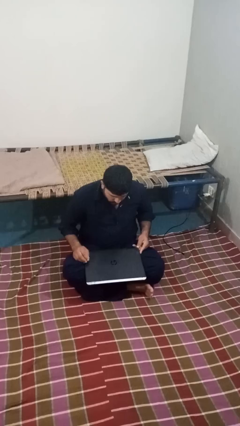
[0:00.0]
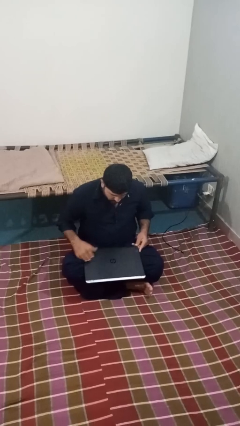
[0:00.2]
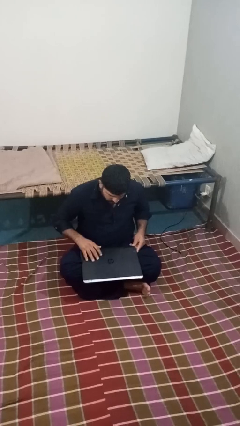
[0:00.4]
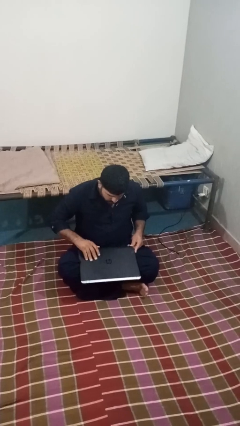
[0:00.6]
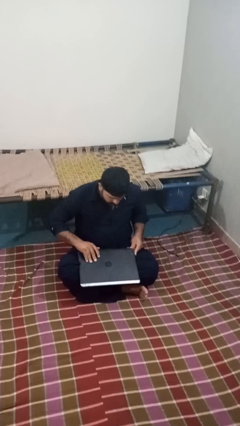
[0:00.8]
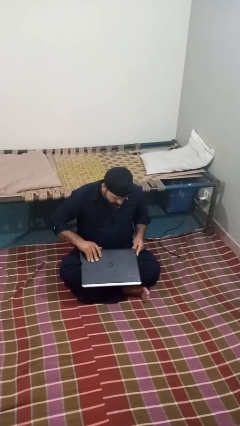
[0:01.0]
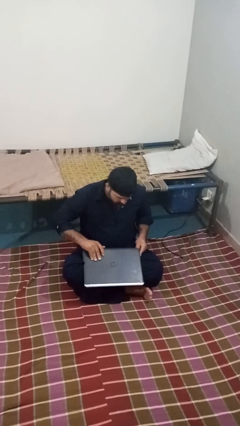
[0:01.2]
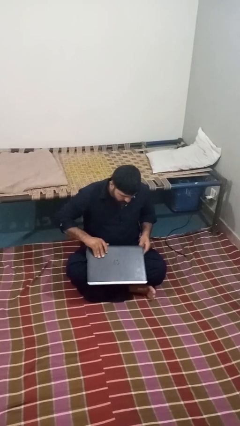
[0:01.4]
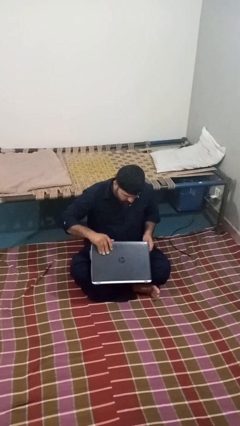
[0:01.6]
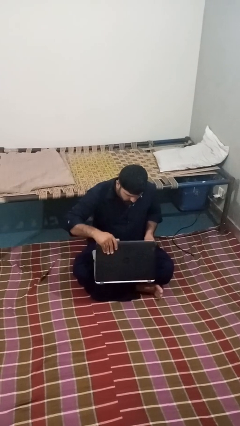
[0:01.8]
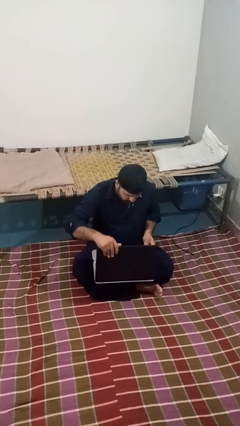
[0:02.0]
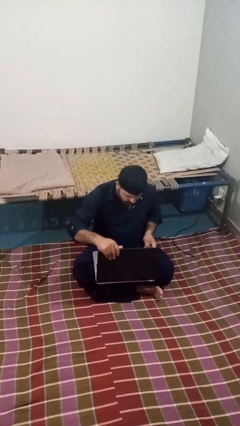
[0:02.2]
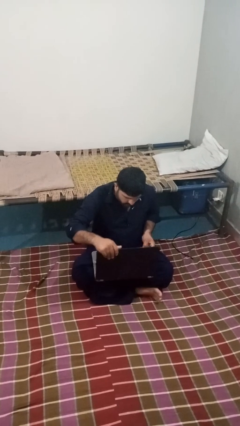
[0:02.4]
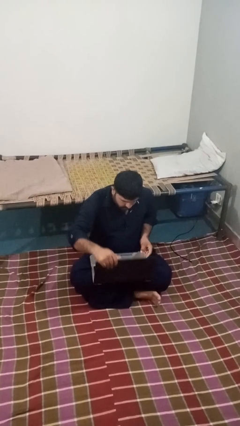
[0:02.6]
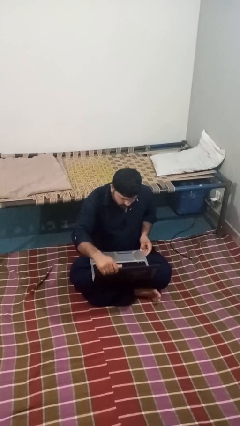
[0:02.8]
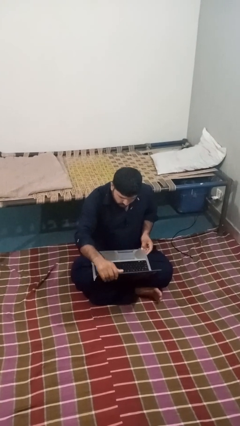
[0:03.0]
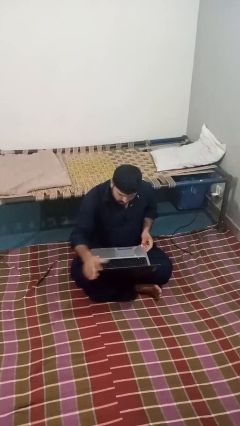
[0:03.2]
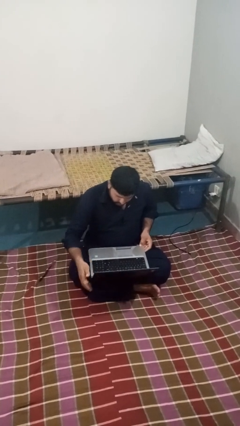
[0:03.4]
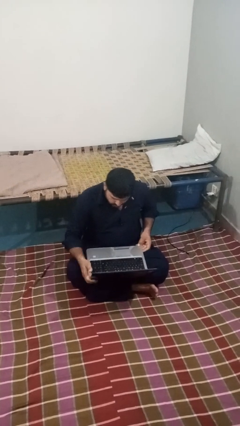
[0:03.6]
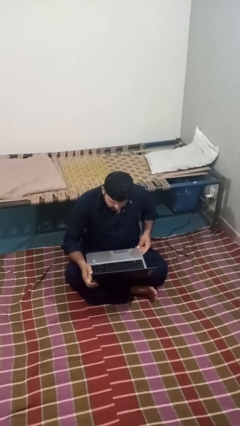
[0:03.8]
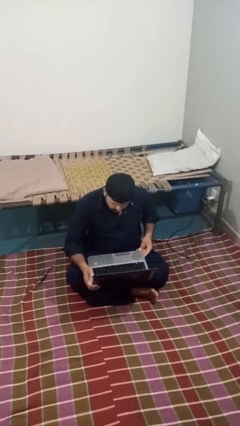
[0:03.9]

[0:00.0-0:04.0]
person opens laptop

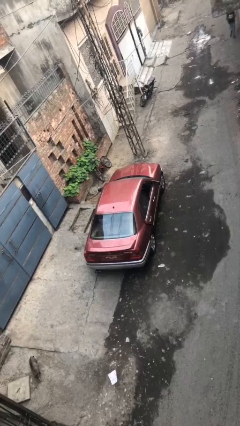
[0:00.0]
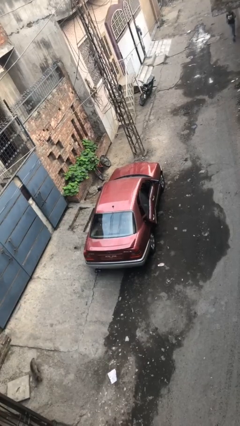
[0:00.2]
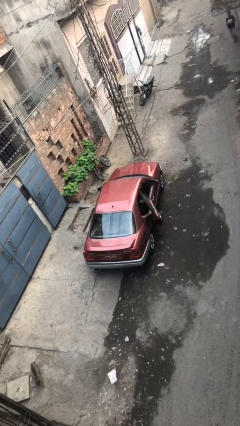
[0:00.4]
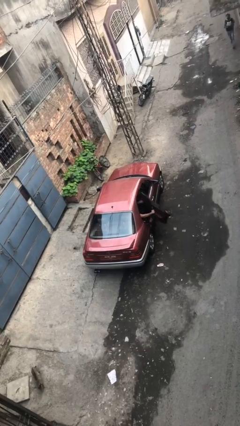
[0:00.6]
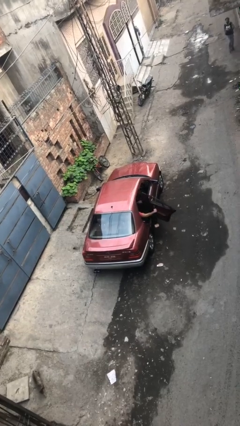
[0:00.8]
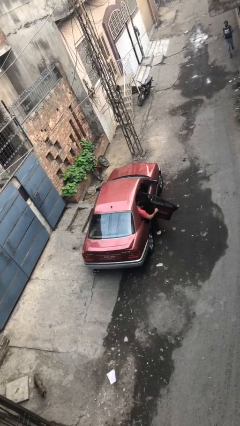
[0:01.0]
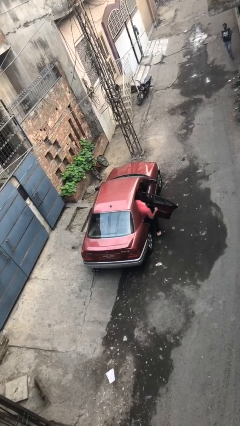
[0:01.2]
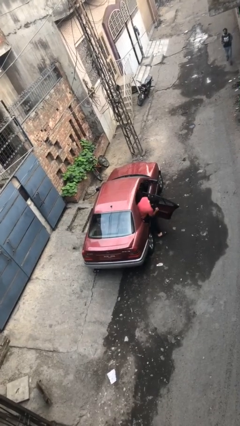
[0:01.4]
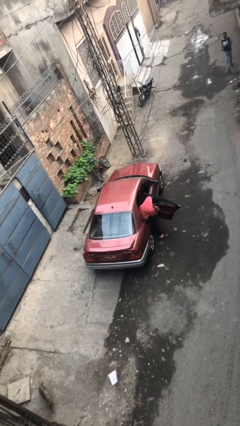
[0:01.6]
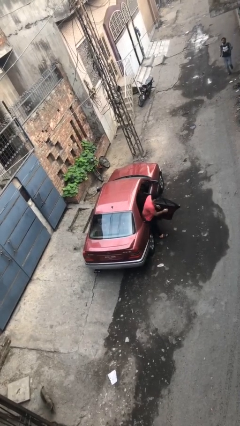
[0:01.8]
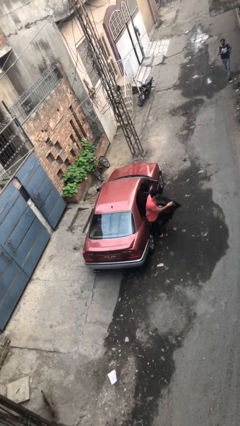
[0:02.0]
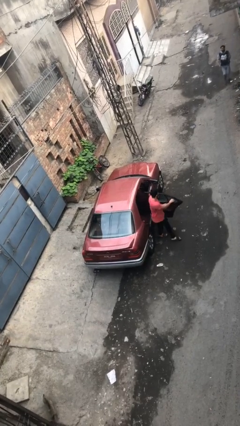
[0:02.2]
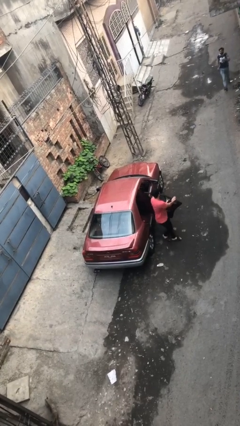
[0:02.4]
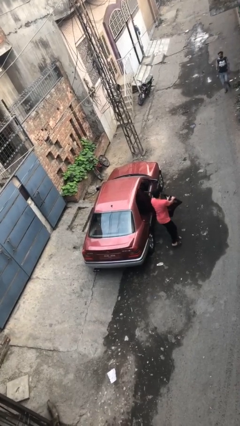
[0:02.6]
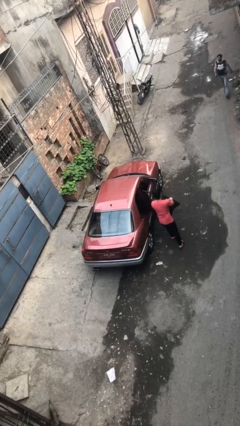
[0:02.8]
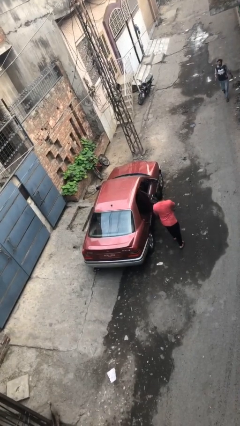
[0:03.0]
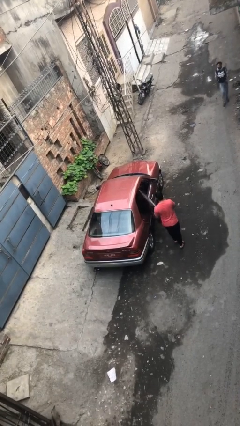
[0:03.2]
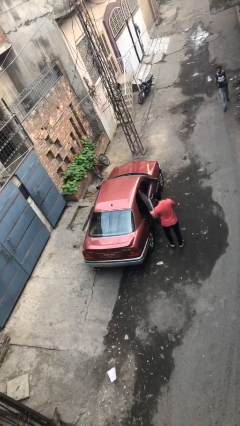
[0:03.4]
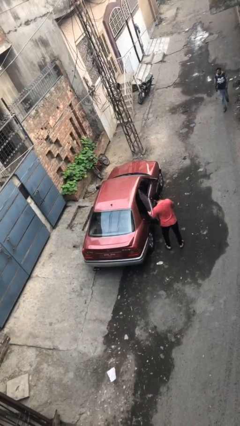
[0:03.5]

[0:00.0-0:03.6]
car drops off person

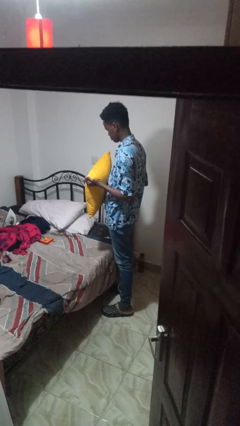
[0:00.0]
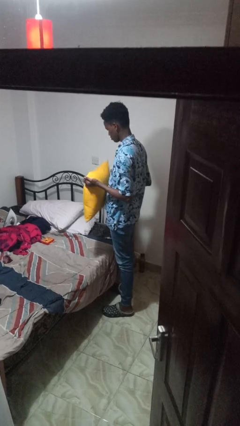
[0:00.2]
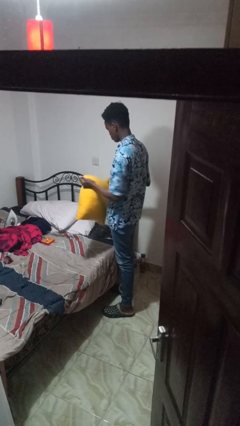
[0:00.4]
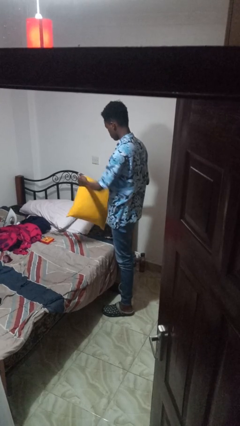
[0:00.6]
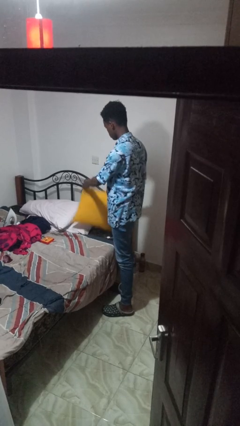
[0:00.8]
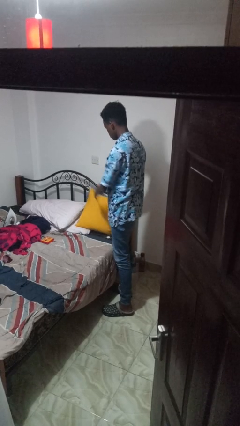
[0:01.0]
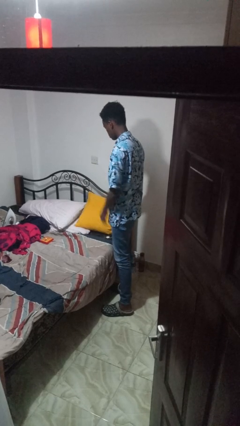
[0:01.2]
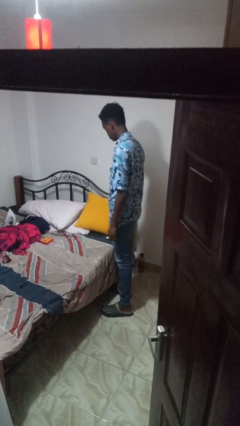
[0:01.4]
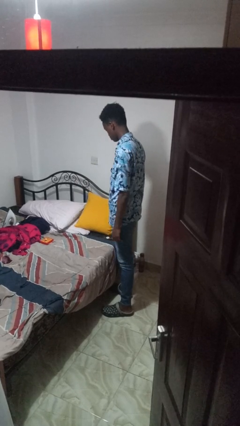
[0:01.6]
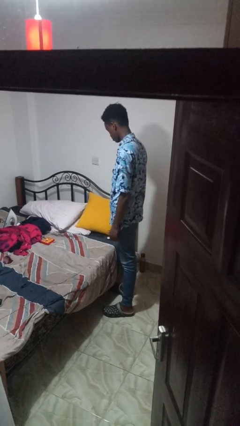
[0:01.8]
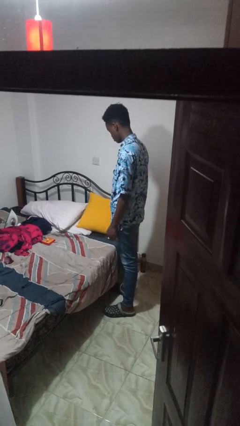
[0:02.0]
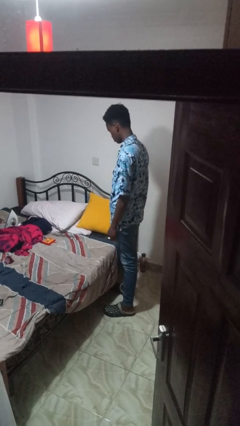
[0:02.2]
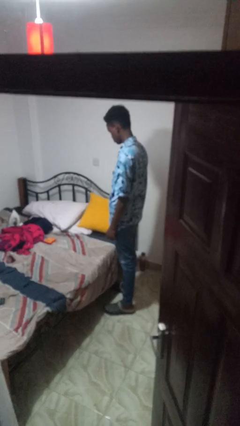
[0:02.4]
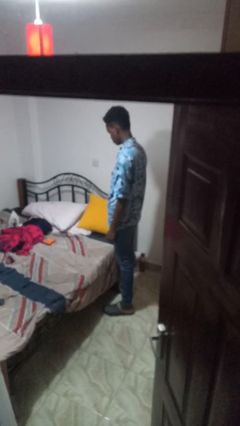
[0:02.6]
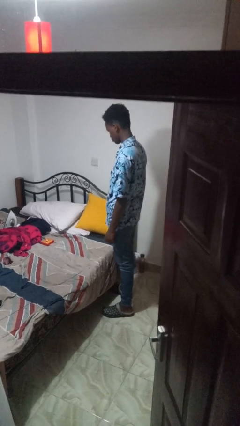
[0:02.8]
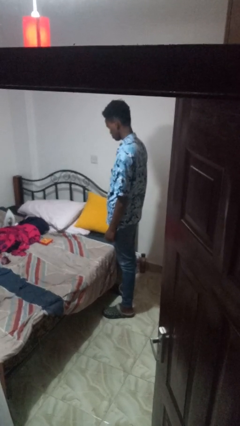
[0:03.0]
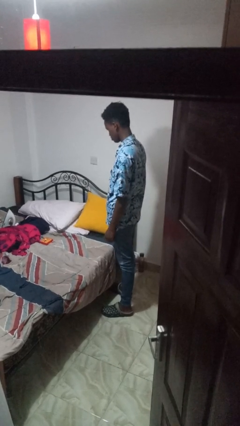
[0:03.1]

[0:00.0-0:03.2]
person puts down object on bed

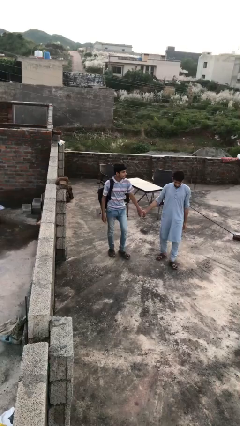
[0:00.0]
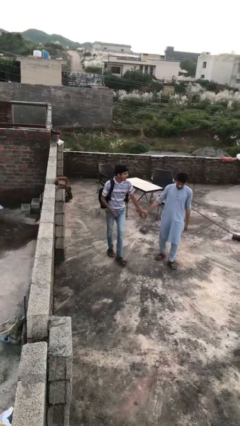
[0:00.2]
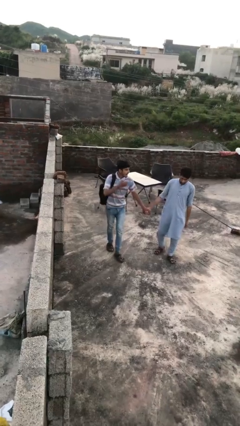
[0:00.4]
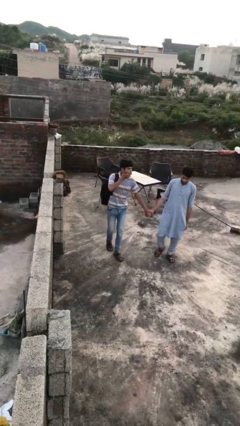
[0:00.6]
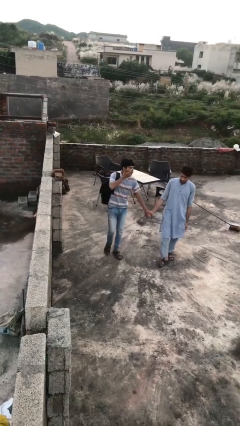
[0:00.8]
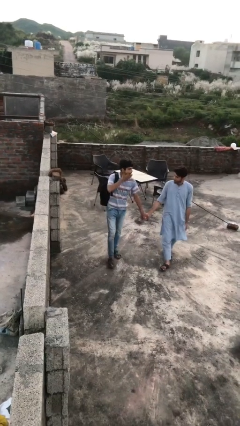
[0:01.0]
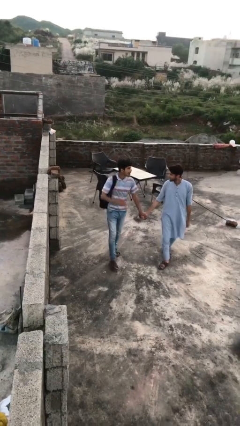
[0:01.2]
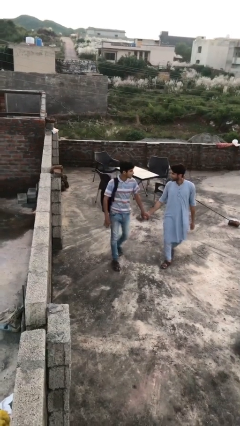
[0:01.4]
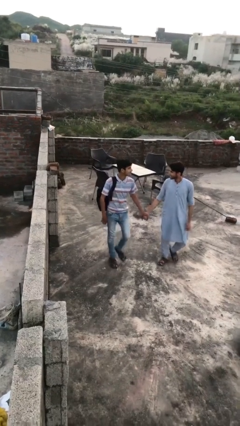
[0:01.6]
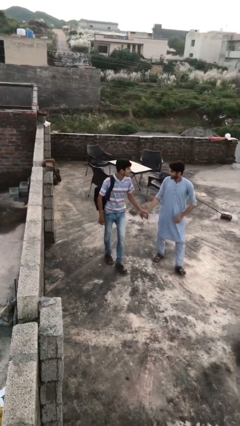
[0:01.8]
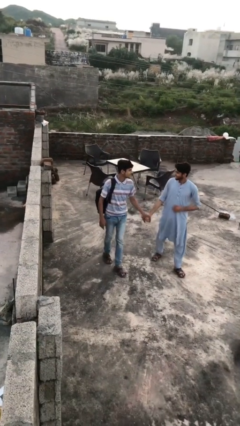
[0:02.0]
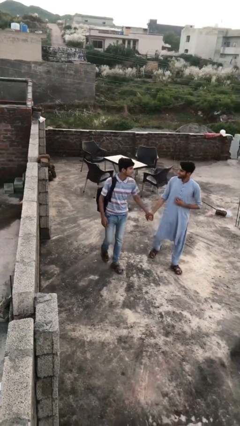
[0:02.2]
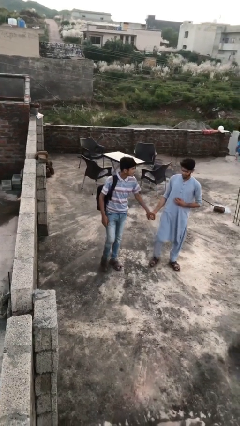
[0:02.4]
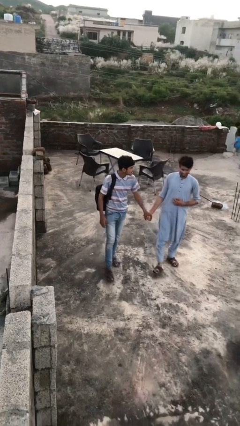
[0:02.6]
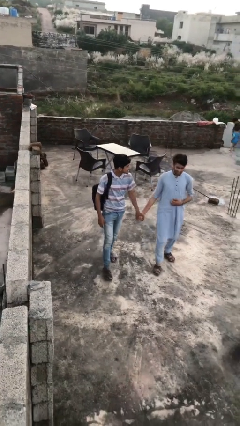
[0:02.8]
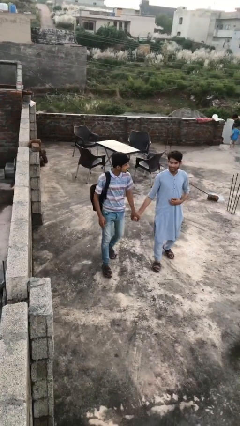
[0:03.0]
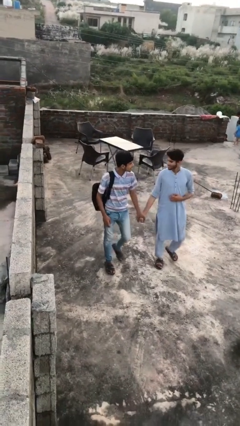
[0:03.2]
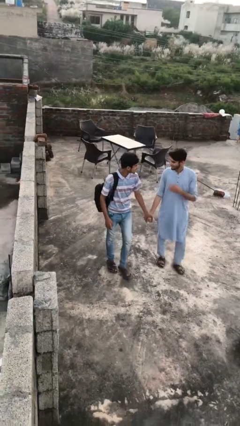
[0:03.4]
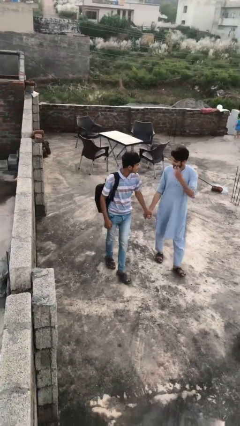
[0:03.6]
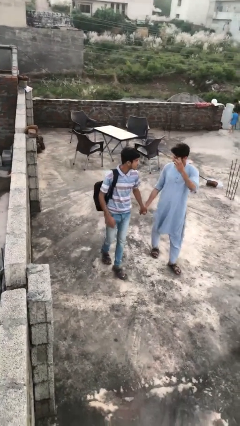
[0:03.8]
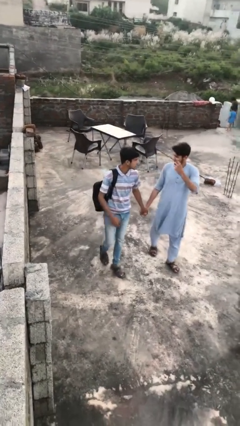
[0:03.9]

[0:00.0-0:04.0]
person holds hand

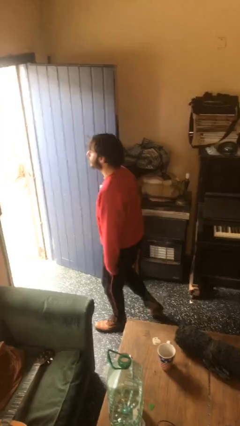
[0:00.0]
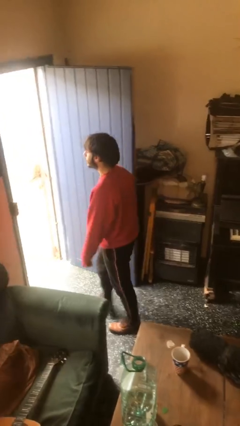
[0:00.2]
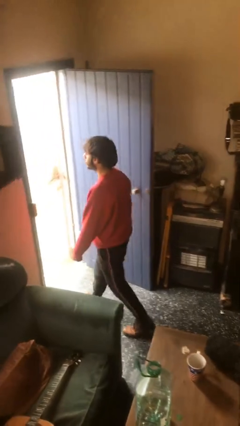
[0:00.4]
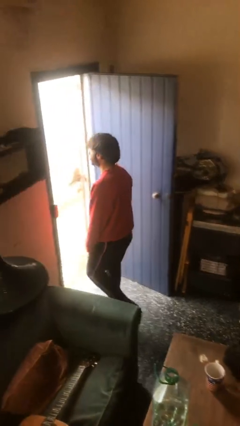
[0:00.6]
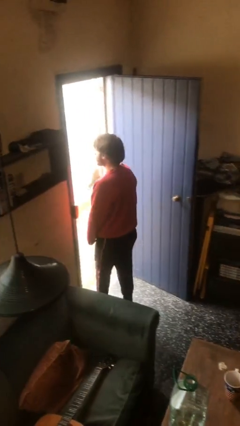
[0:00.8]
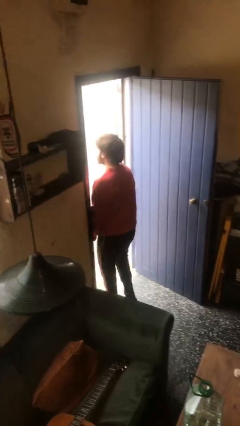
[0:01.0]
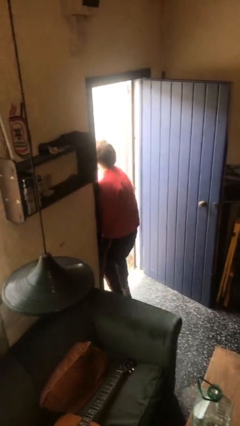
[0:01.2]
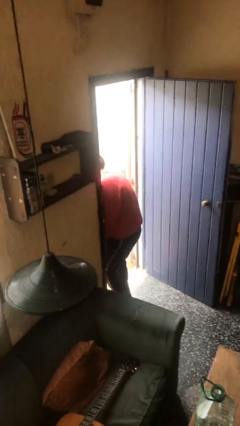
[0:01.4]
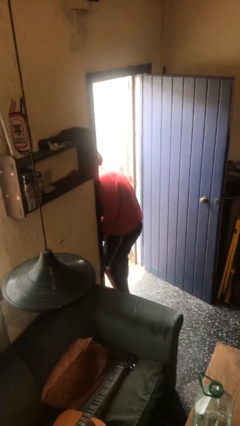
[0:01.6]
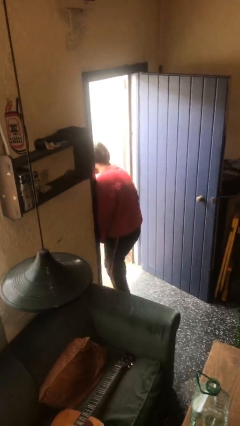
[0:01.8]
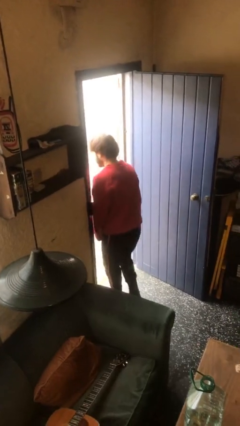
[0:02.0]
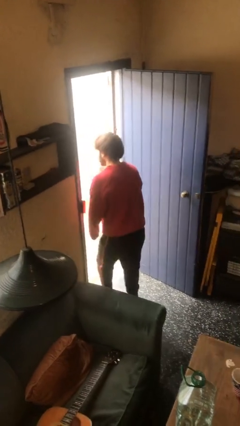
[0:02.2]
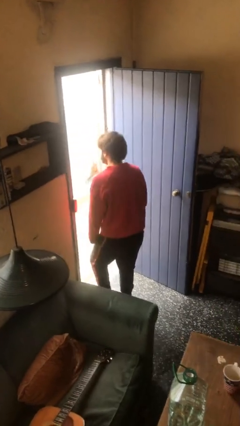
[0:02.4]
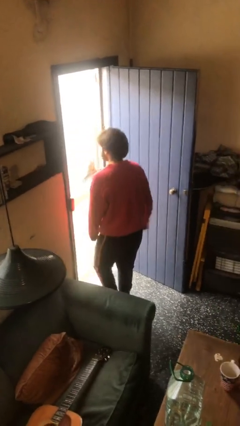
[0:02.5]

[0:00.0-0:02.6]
person bumps into wall

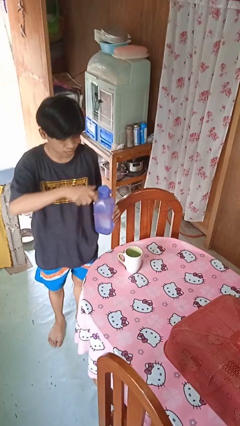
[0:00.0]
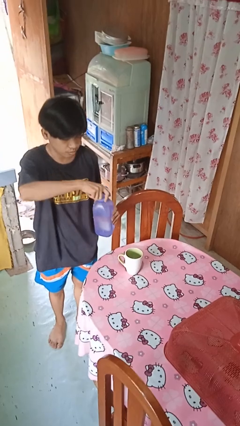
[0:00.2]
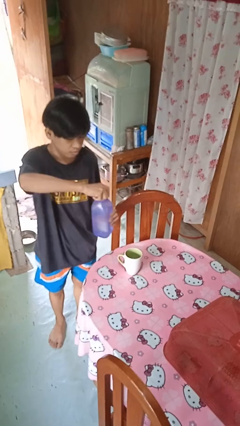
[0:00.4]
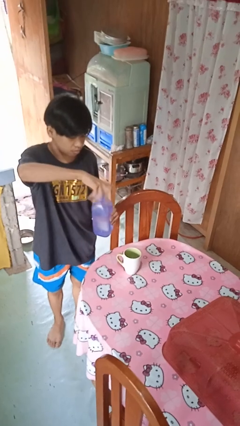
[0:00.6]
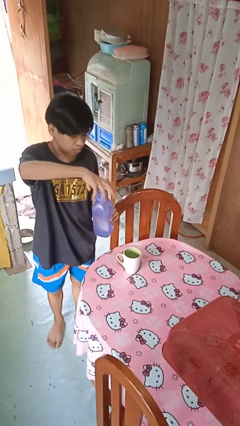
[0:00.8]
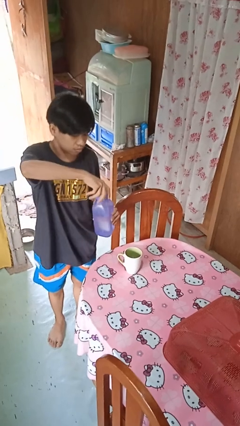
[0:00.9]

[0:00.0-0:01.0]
person unscrews lid from bottle
